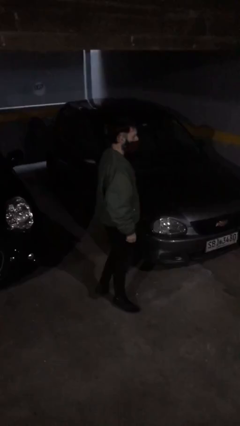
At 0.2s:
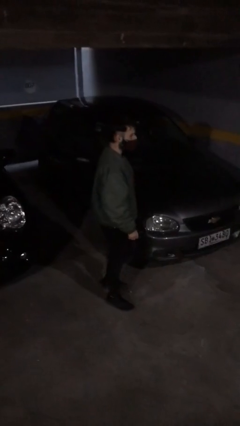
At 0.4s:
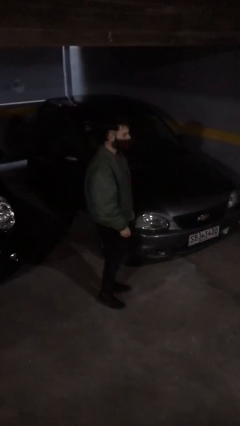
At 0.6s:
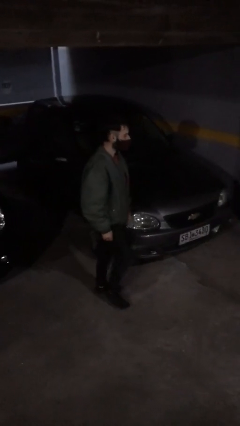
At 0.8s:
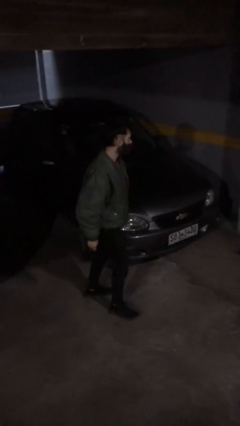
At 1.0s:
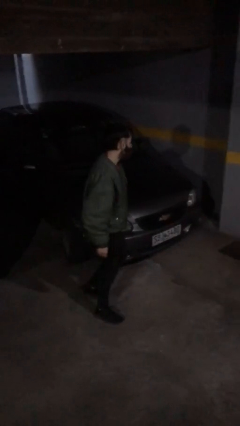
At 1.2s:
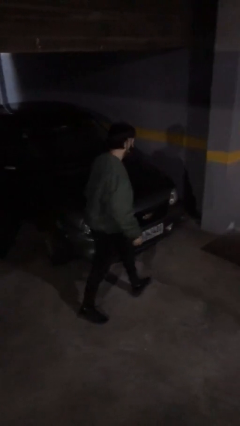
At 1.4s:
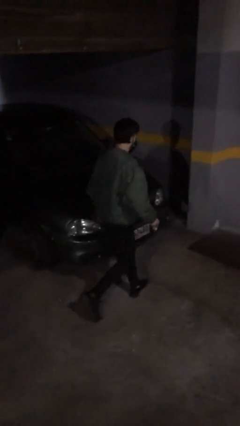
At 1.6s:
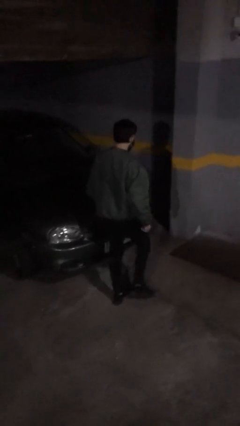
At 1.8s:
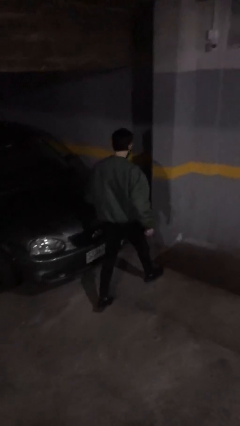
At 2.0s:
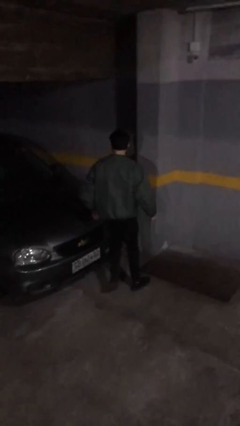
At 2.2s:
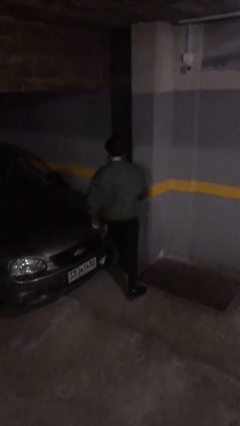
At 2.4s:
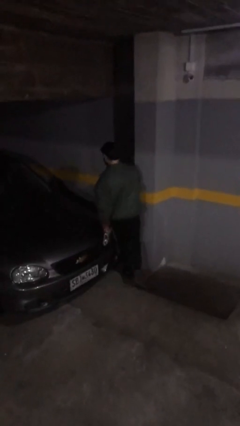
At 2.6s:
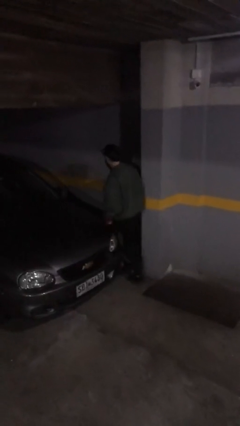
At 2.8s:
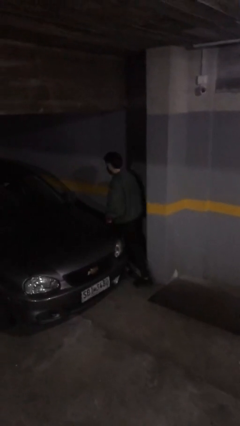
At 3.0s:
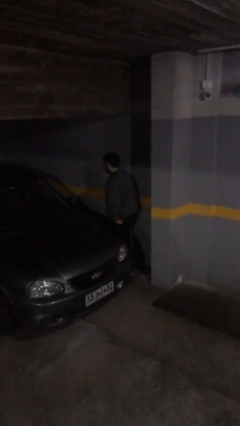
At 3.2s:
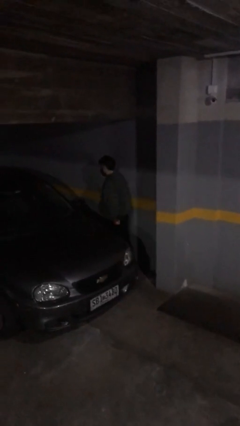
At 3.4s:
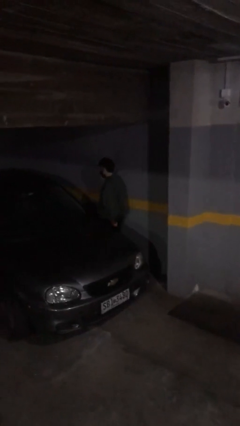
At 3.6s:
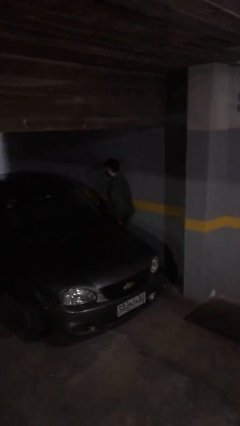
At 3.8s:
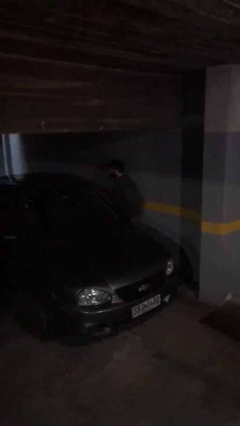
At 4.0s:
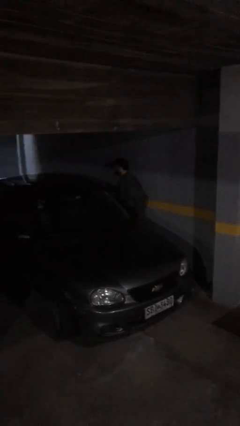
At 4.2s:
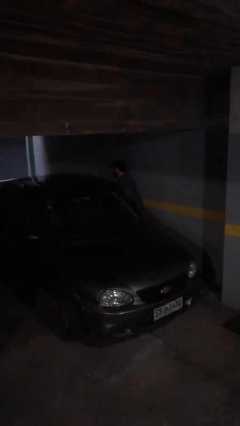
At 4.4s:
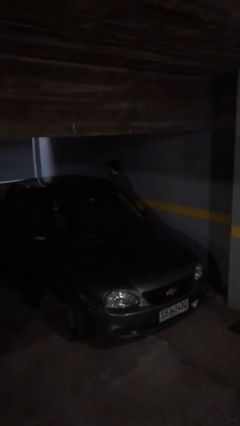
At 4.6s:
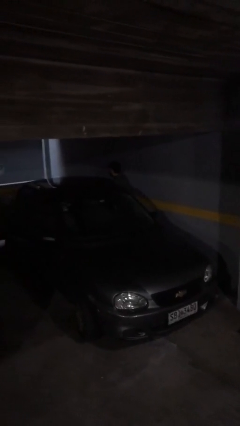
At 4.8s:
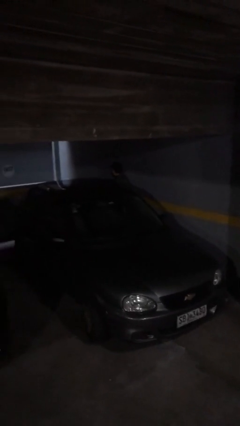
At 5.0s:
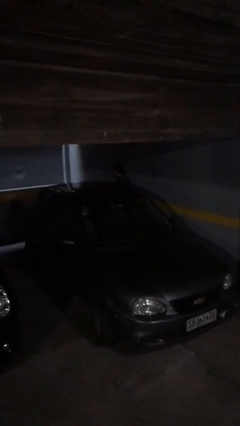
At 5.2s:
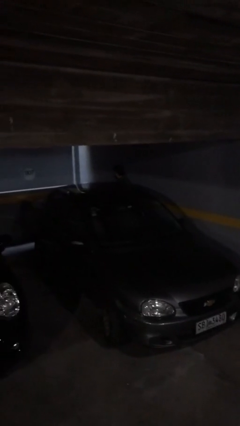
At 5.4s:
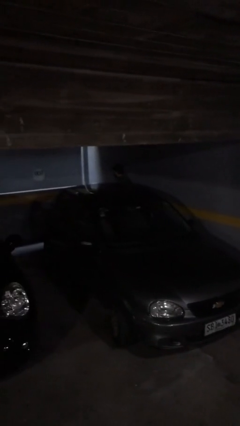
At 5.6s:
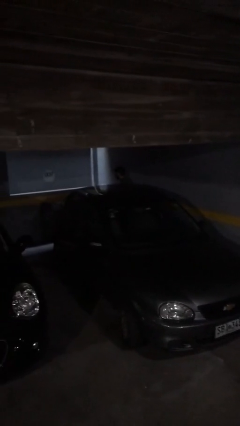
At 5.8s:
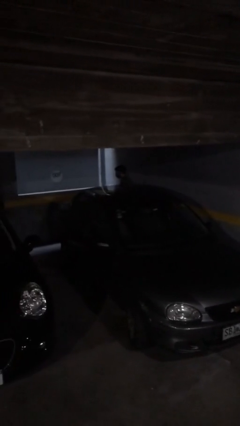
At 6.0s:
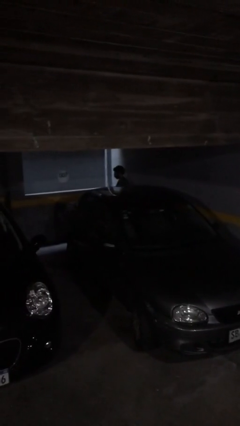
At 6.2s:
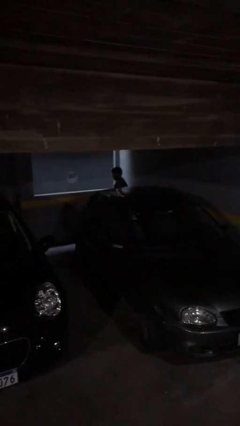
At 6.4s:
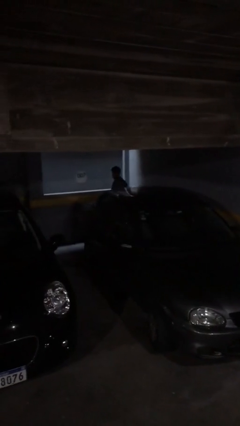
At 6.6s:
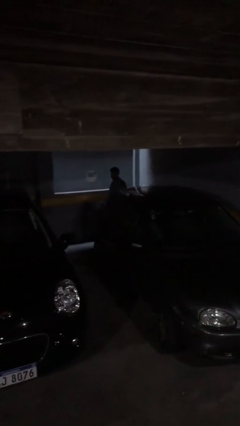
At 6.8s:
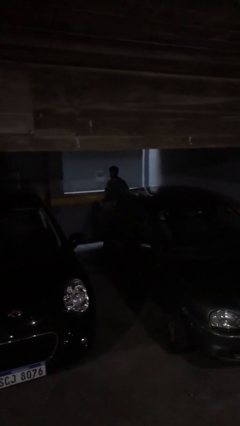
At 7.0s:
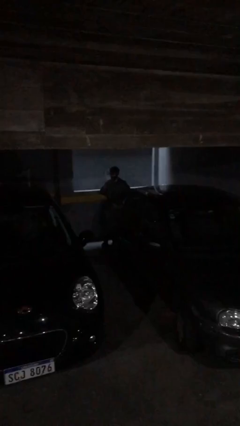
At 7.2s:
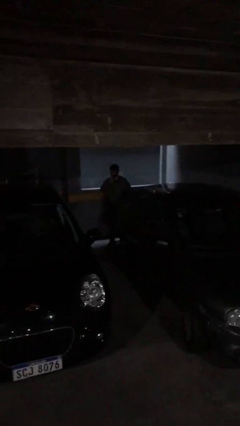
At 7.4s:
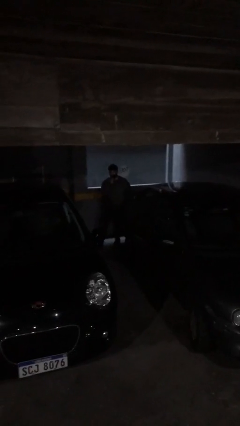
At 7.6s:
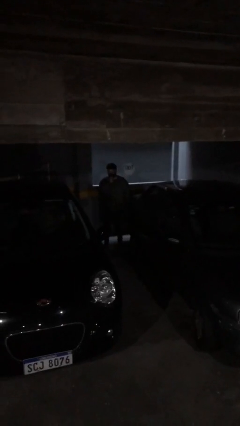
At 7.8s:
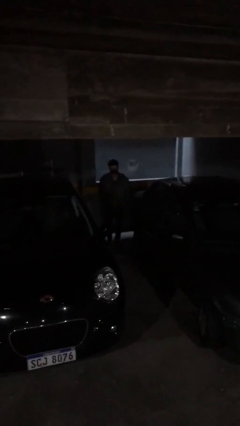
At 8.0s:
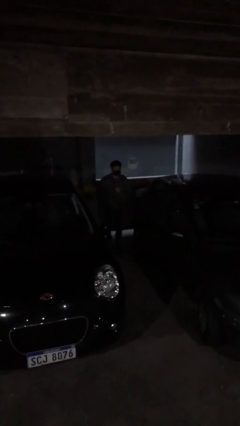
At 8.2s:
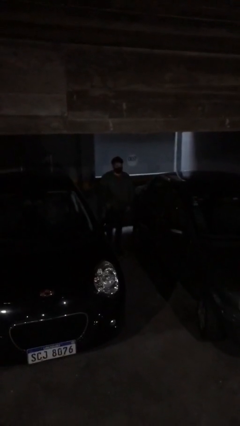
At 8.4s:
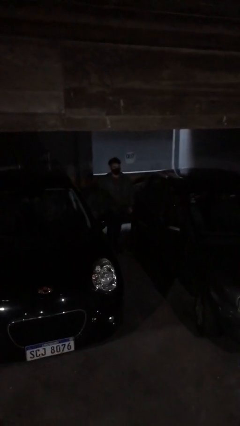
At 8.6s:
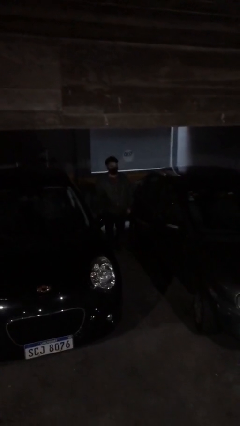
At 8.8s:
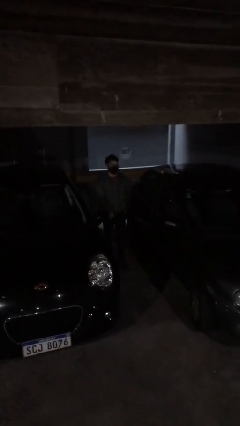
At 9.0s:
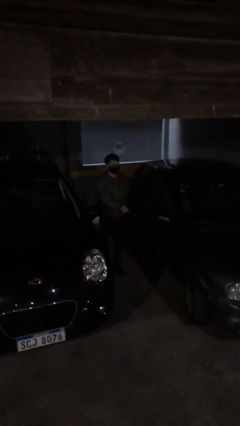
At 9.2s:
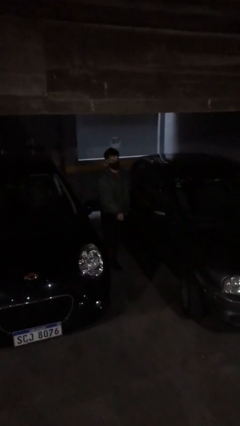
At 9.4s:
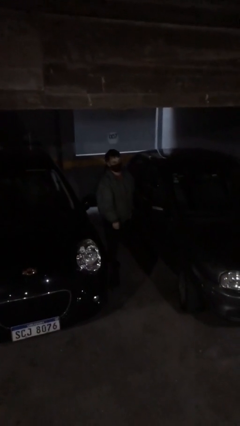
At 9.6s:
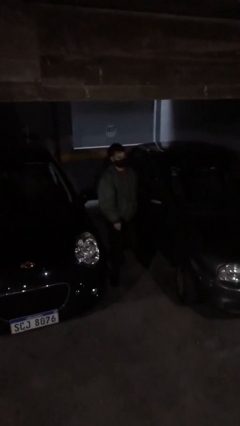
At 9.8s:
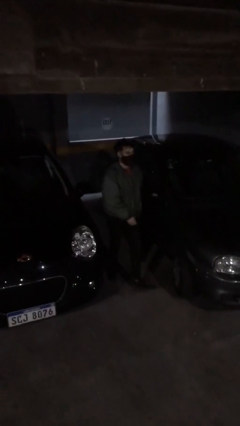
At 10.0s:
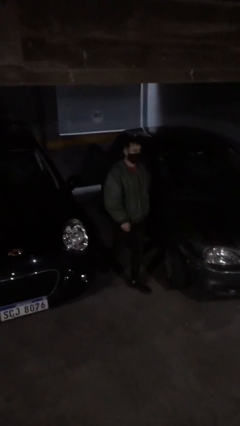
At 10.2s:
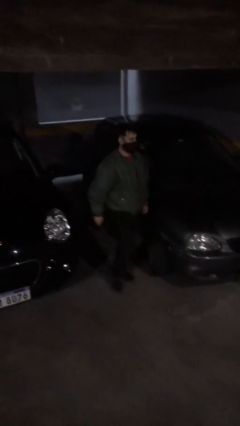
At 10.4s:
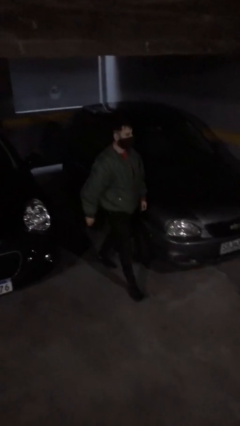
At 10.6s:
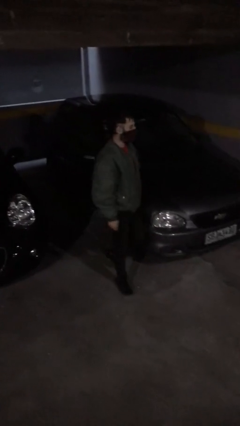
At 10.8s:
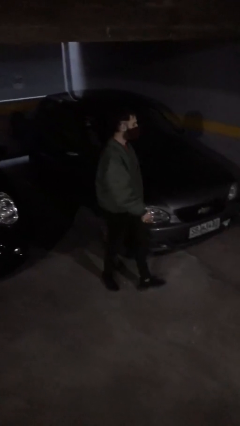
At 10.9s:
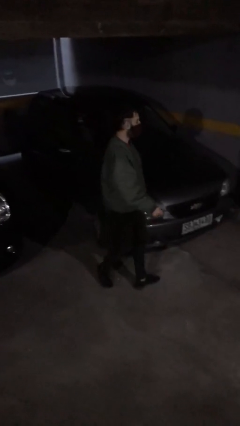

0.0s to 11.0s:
person walks around car

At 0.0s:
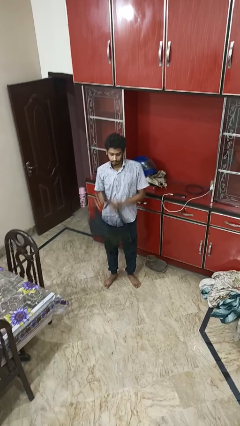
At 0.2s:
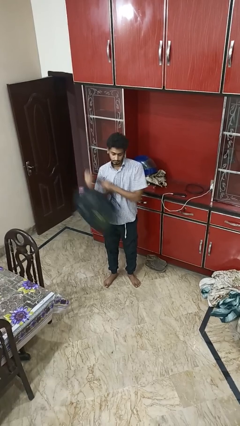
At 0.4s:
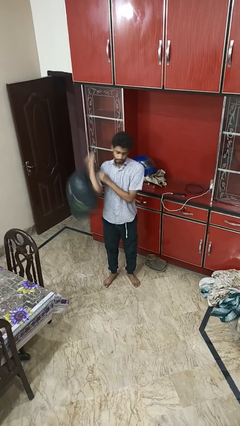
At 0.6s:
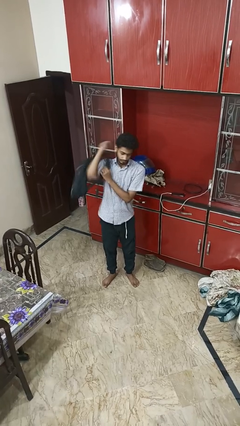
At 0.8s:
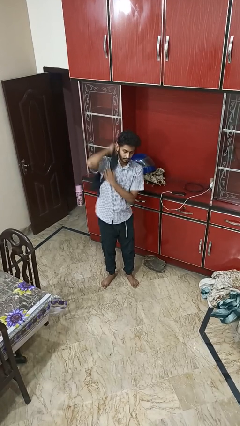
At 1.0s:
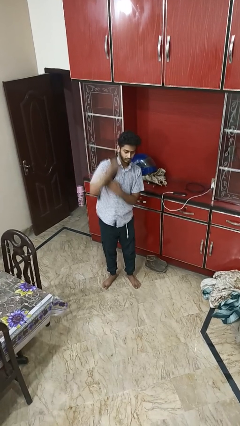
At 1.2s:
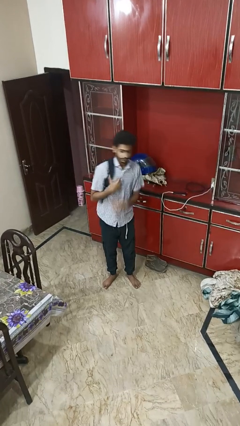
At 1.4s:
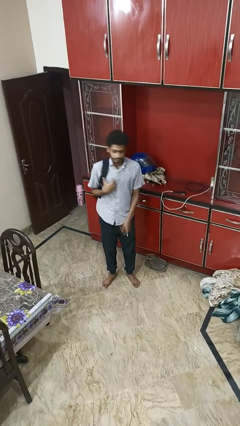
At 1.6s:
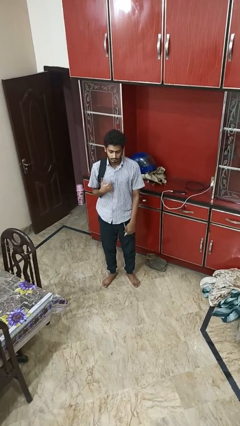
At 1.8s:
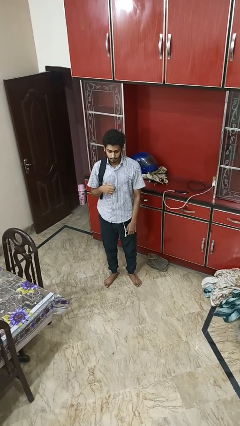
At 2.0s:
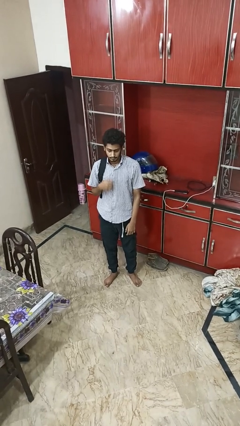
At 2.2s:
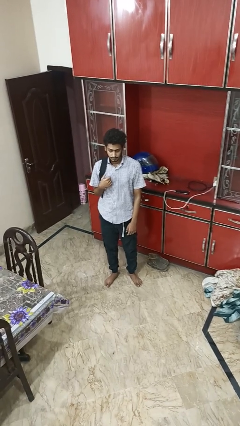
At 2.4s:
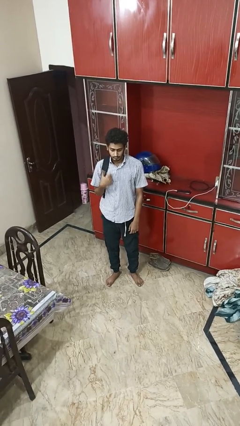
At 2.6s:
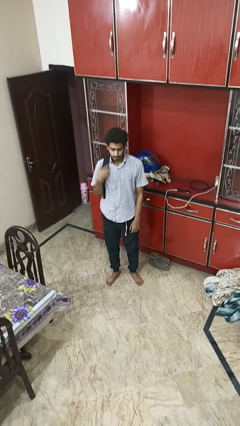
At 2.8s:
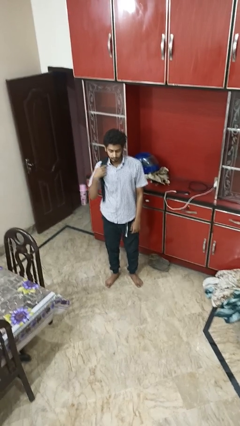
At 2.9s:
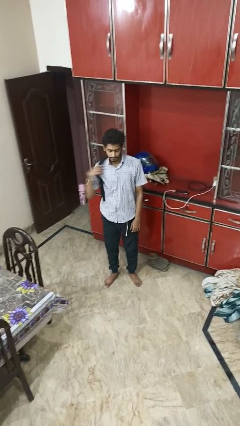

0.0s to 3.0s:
person puts on backpack

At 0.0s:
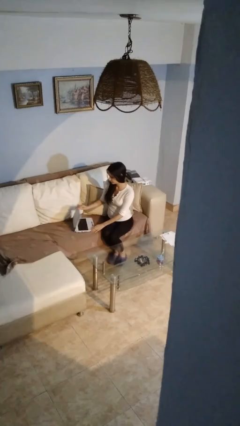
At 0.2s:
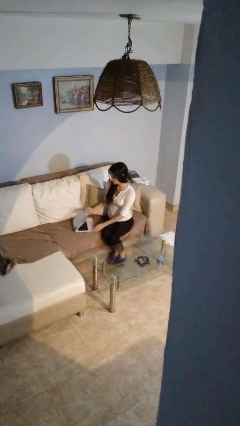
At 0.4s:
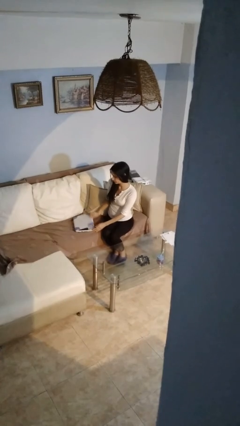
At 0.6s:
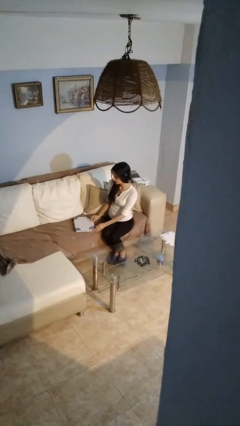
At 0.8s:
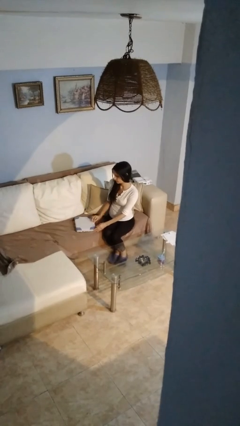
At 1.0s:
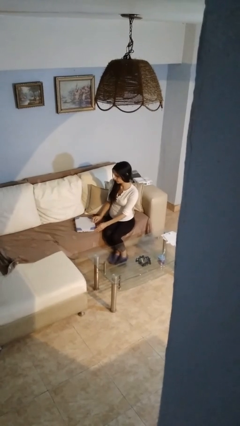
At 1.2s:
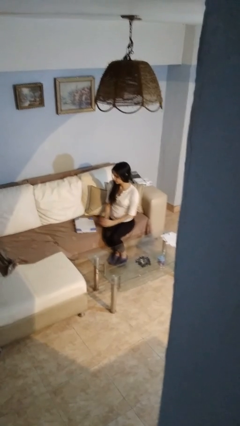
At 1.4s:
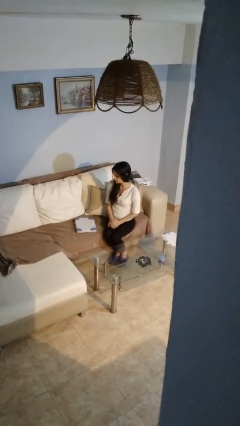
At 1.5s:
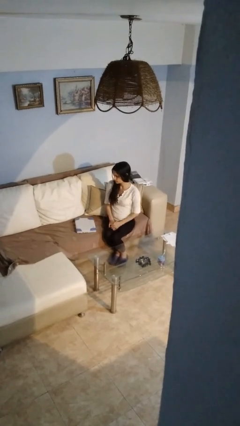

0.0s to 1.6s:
person closes laptop

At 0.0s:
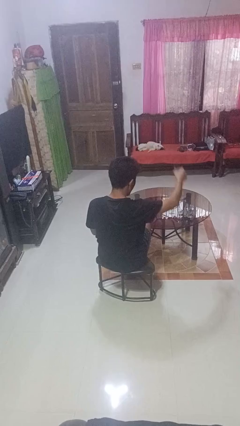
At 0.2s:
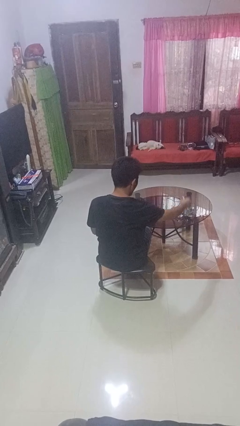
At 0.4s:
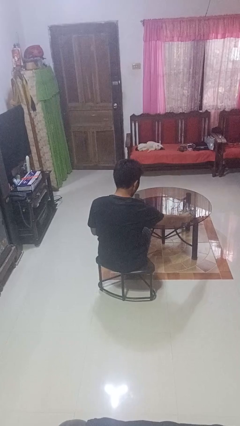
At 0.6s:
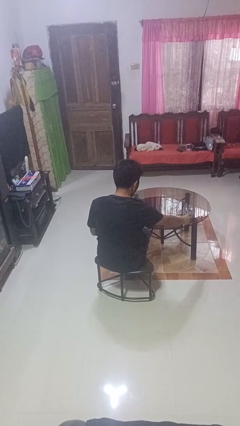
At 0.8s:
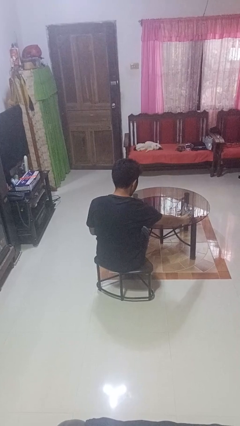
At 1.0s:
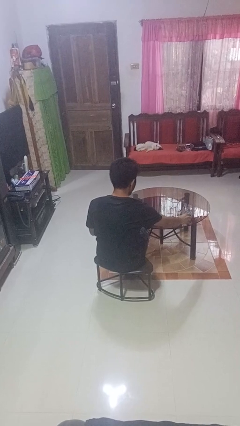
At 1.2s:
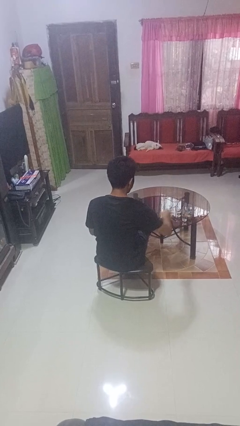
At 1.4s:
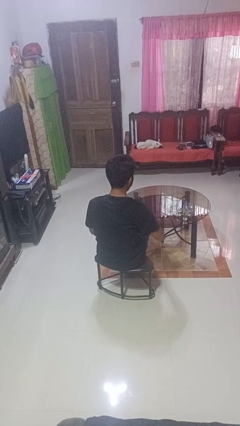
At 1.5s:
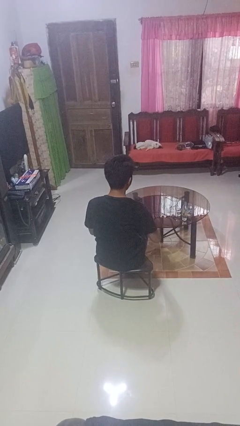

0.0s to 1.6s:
person puts down object on table

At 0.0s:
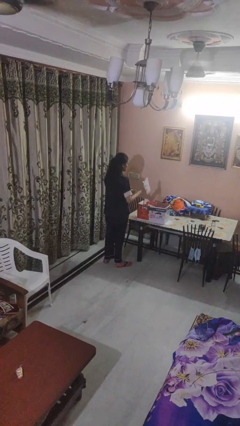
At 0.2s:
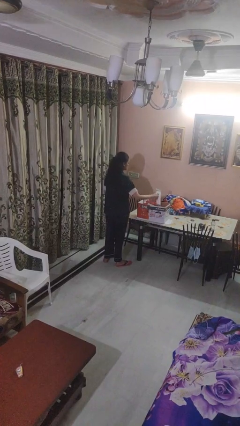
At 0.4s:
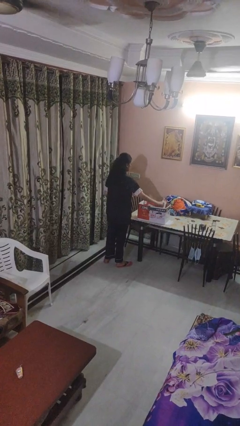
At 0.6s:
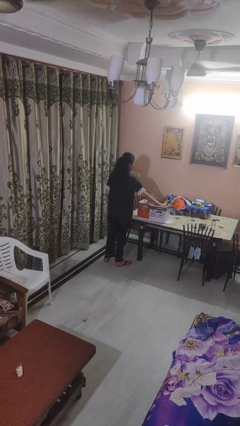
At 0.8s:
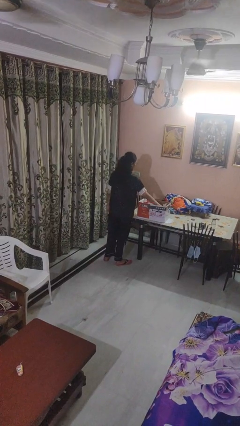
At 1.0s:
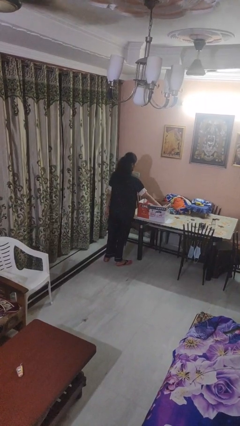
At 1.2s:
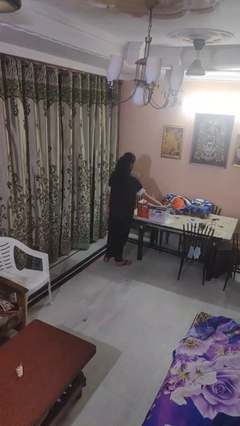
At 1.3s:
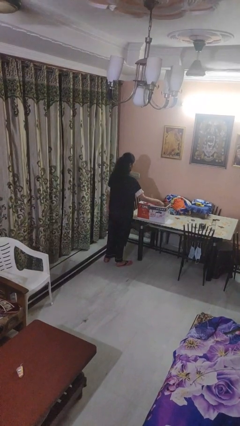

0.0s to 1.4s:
person puts object into box
